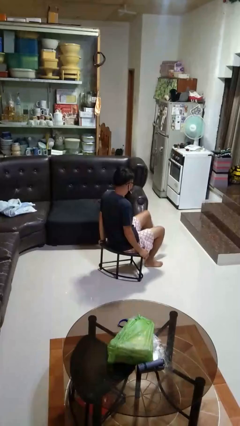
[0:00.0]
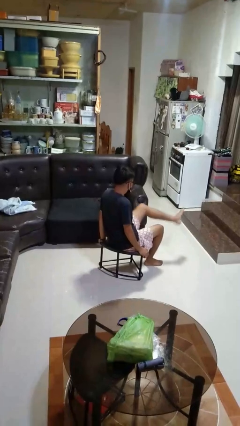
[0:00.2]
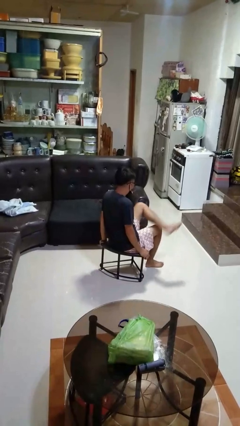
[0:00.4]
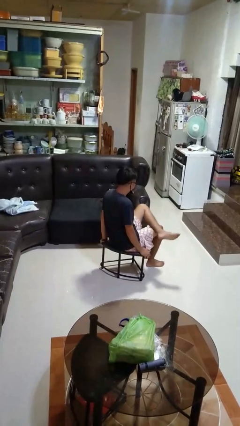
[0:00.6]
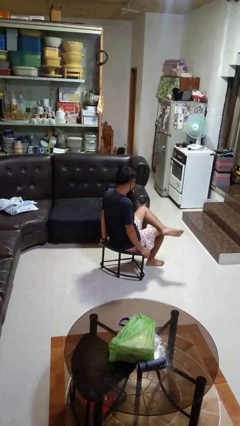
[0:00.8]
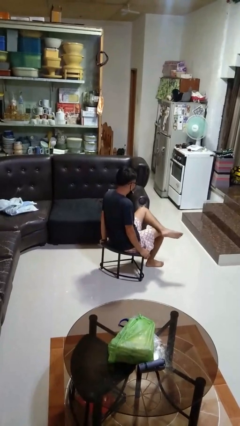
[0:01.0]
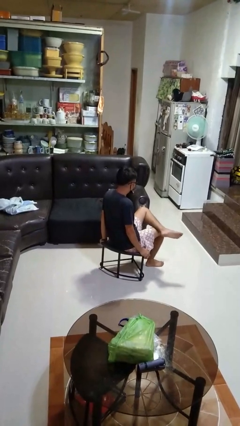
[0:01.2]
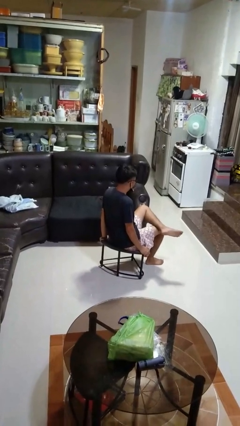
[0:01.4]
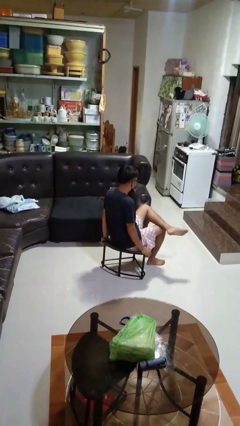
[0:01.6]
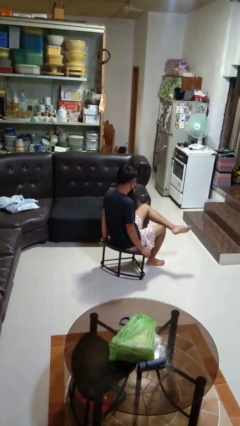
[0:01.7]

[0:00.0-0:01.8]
person crosses legs

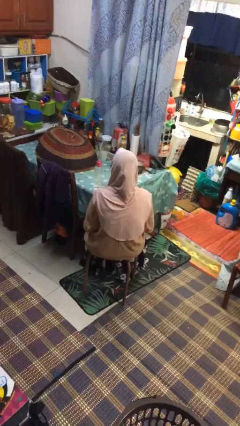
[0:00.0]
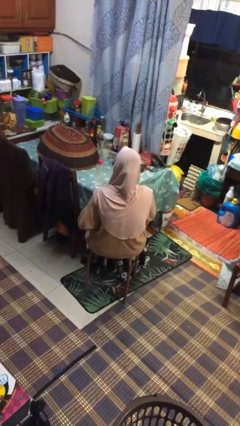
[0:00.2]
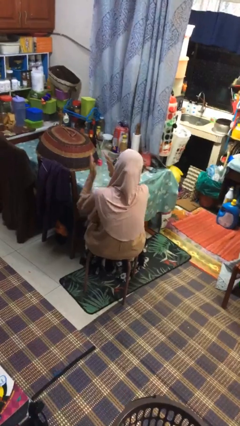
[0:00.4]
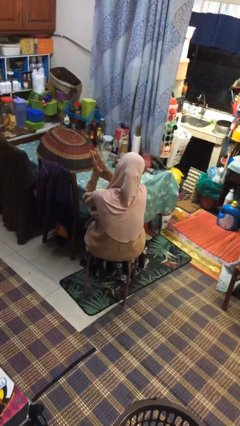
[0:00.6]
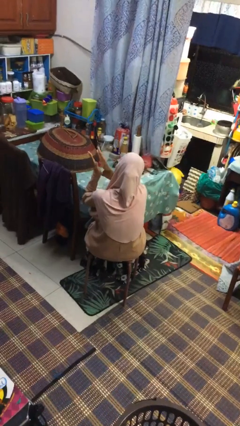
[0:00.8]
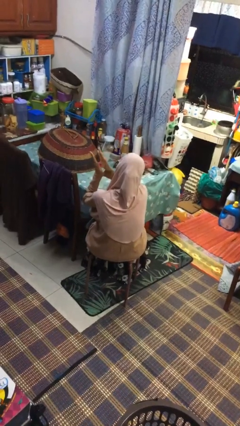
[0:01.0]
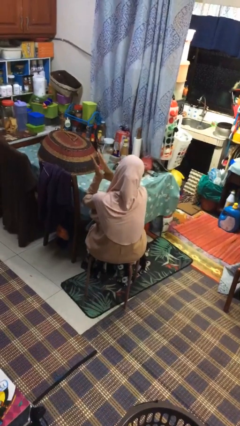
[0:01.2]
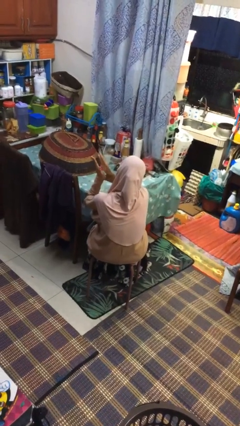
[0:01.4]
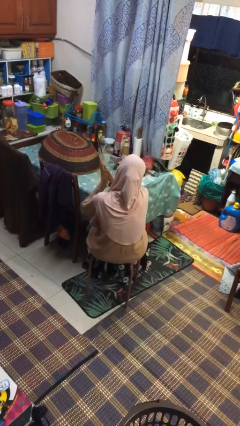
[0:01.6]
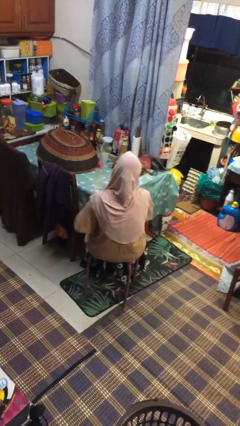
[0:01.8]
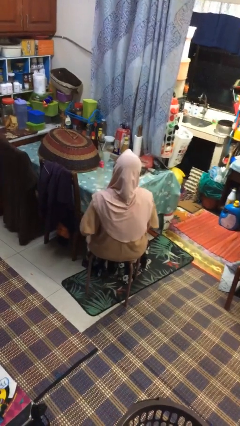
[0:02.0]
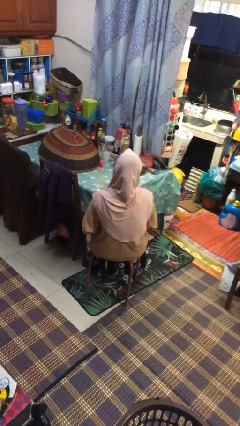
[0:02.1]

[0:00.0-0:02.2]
person claps hands

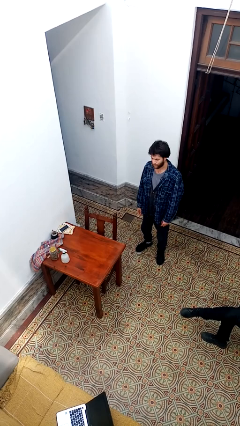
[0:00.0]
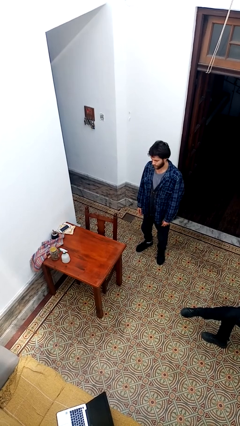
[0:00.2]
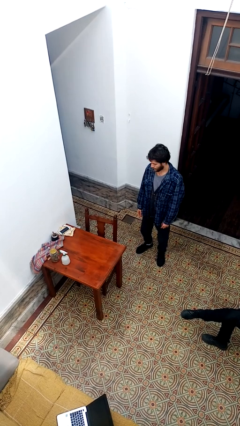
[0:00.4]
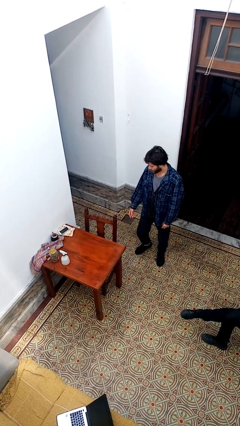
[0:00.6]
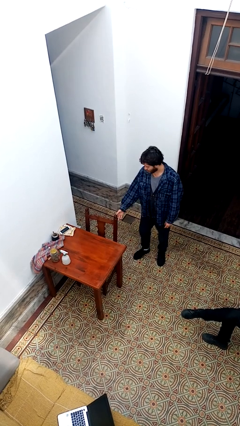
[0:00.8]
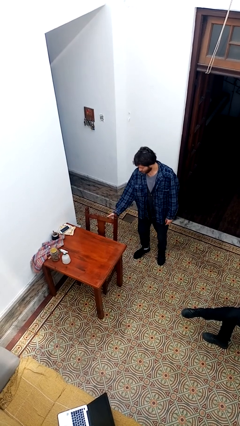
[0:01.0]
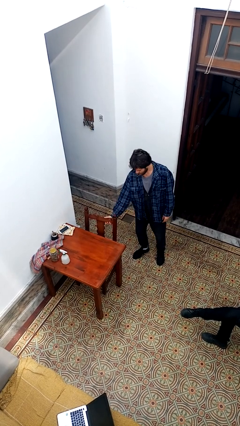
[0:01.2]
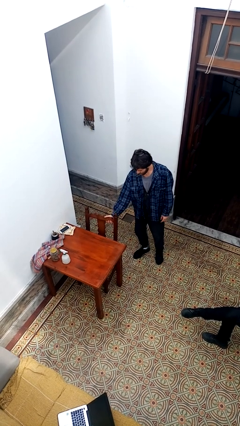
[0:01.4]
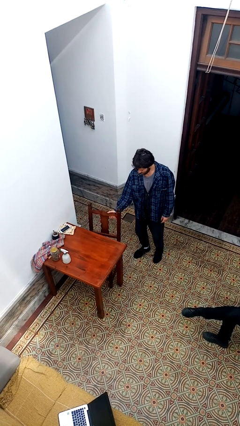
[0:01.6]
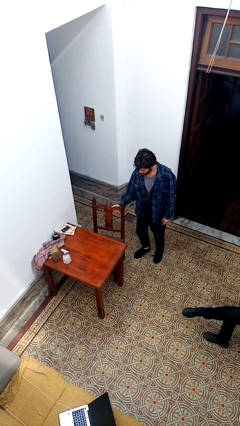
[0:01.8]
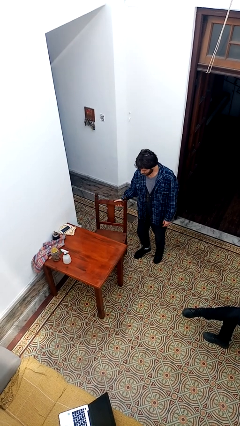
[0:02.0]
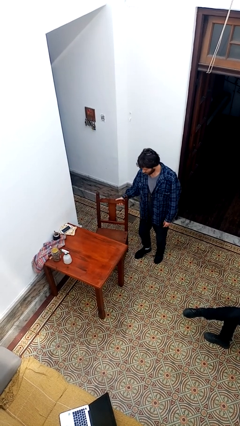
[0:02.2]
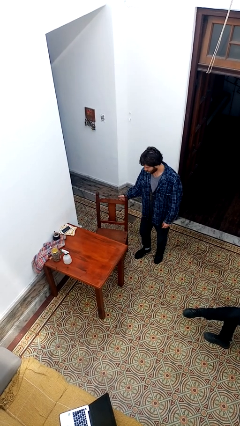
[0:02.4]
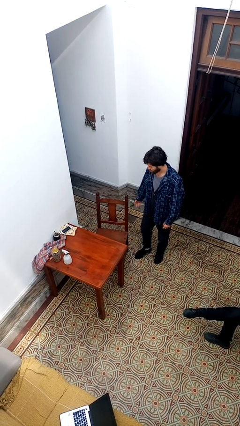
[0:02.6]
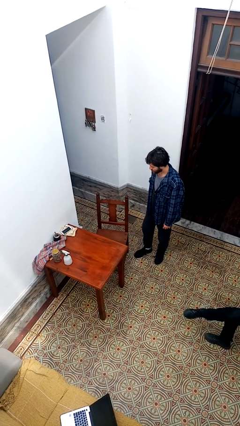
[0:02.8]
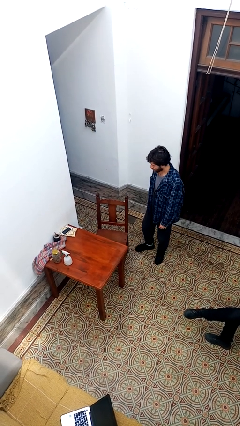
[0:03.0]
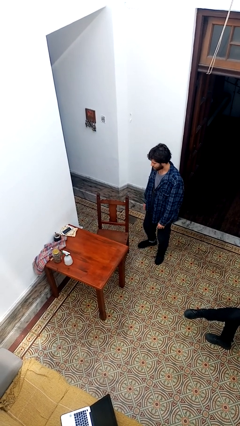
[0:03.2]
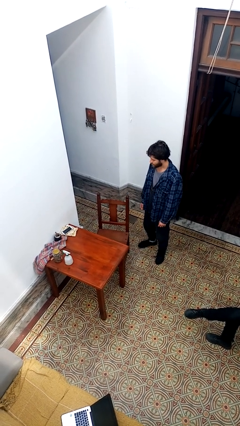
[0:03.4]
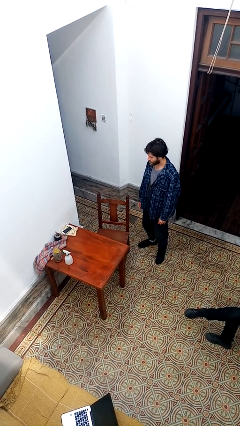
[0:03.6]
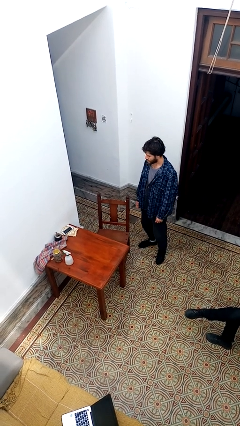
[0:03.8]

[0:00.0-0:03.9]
person pulls out chair

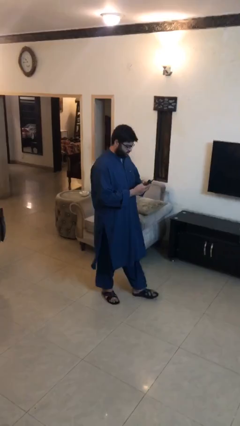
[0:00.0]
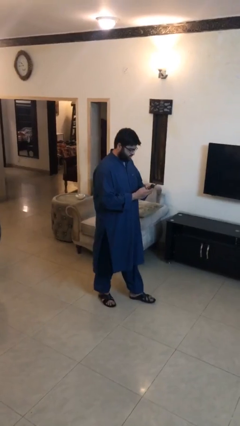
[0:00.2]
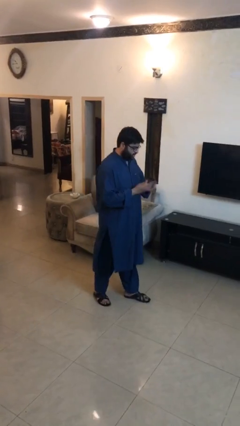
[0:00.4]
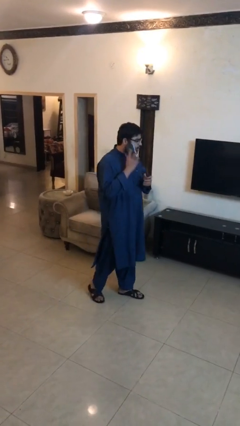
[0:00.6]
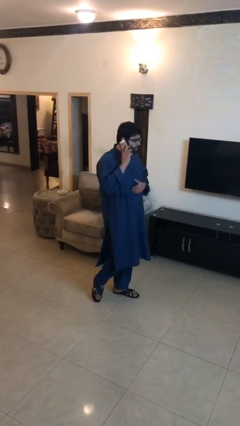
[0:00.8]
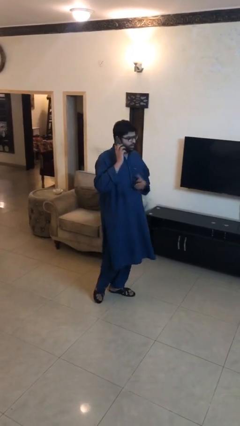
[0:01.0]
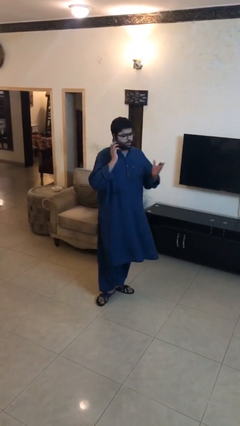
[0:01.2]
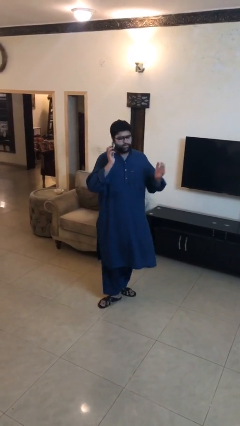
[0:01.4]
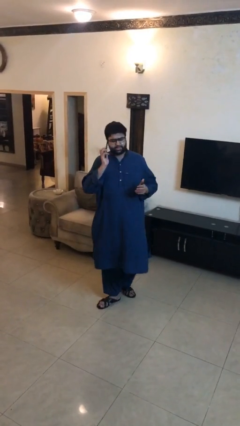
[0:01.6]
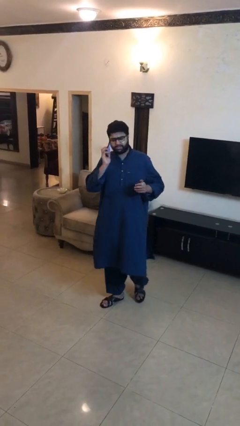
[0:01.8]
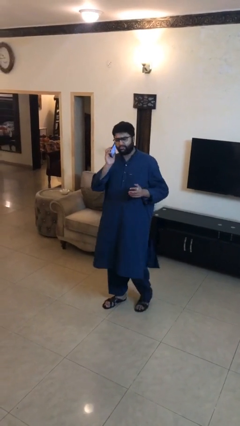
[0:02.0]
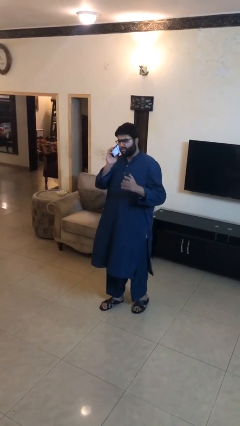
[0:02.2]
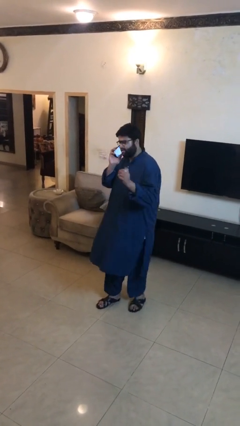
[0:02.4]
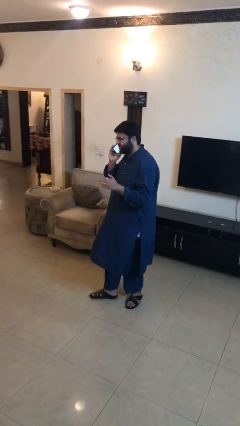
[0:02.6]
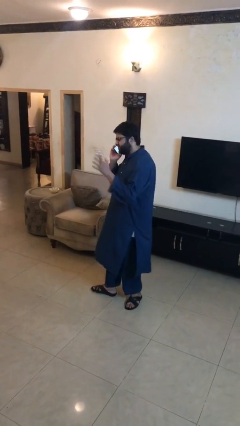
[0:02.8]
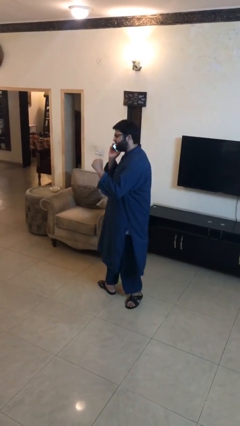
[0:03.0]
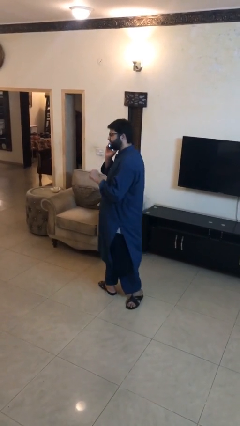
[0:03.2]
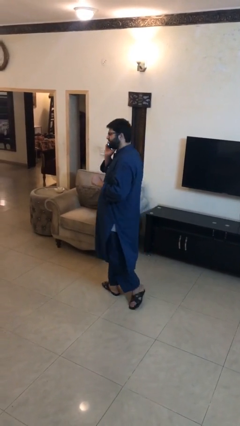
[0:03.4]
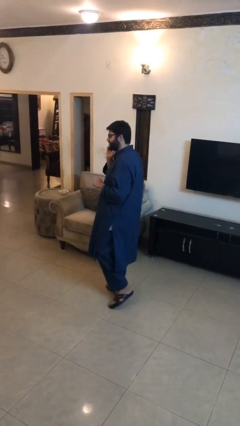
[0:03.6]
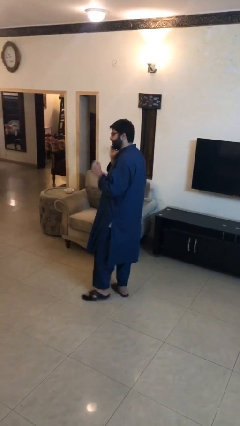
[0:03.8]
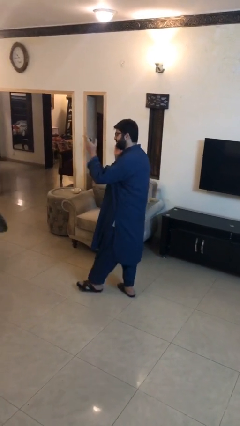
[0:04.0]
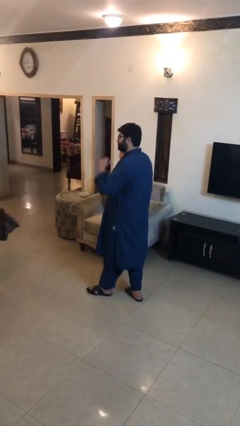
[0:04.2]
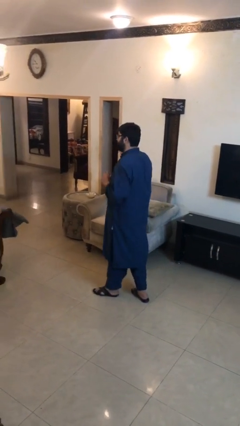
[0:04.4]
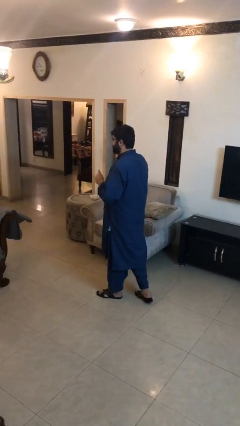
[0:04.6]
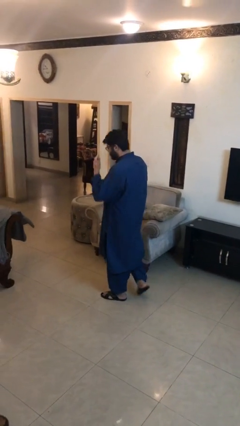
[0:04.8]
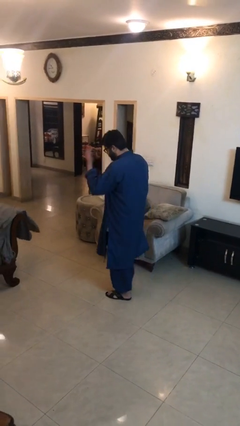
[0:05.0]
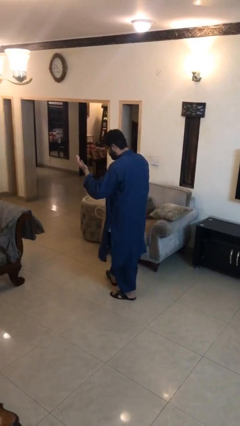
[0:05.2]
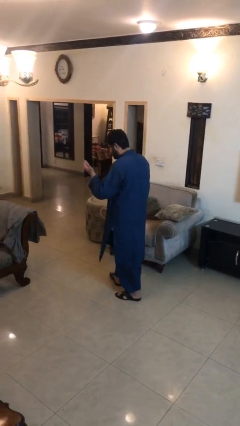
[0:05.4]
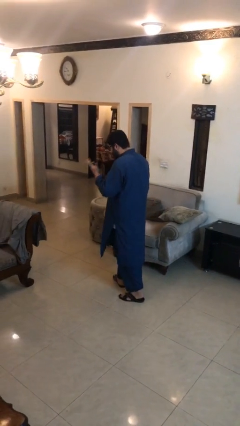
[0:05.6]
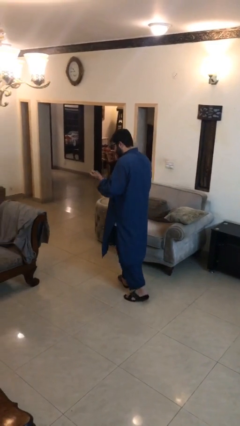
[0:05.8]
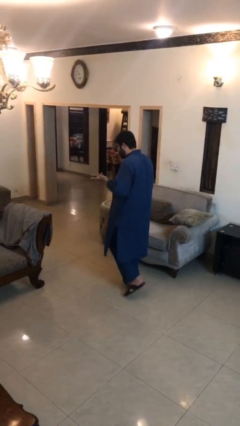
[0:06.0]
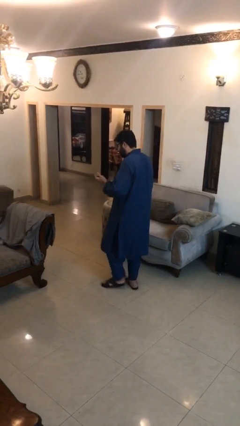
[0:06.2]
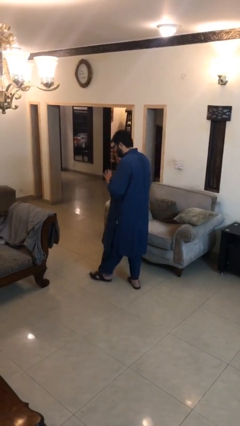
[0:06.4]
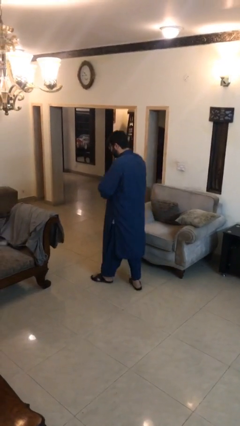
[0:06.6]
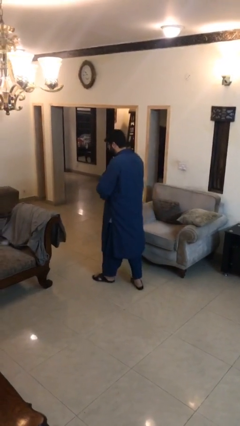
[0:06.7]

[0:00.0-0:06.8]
person talks on phone

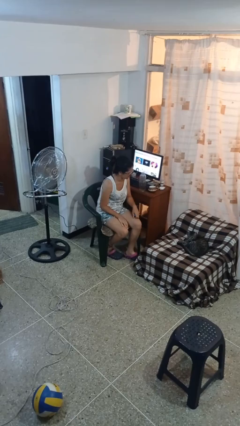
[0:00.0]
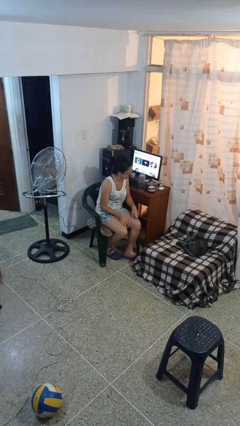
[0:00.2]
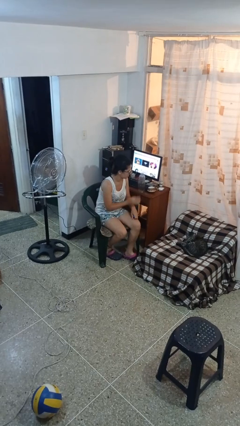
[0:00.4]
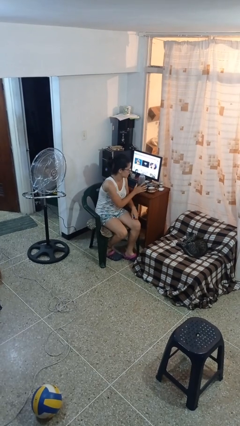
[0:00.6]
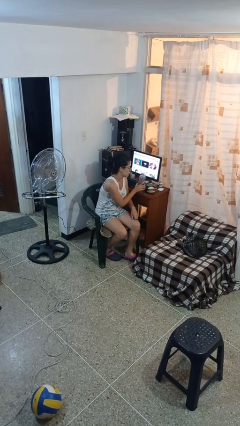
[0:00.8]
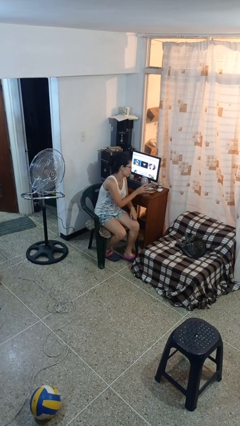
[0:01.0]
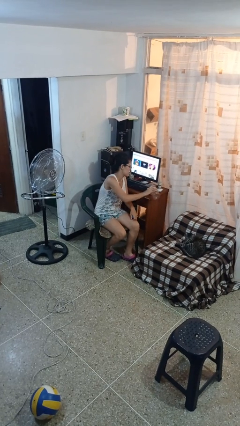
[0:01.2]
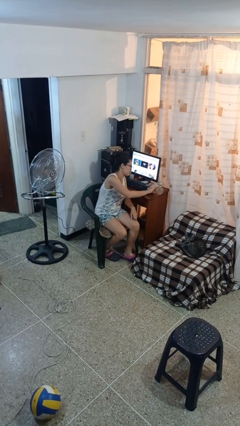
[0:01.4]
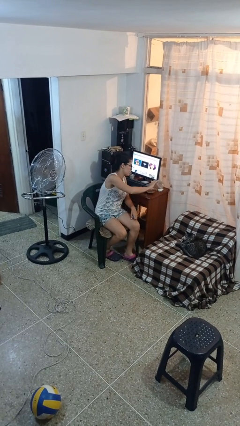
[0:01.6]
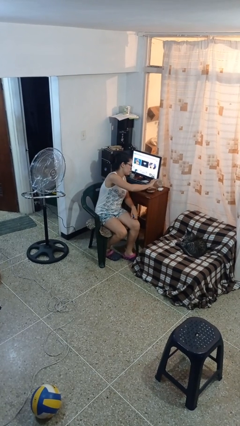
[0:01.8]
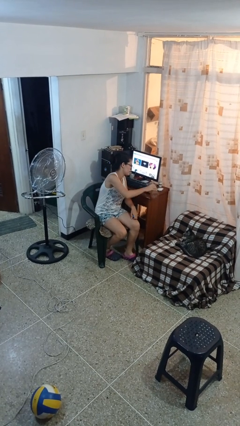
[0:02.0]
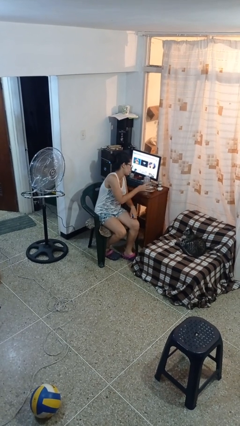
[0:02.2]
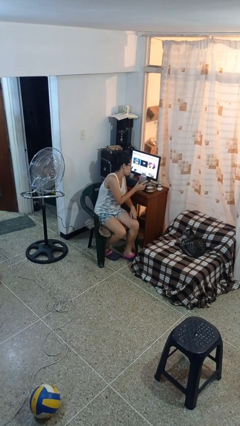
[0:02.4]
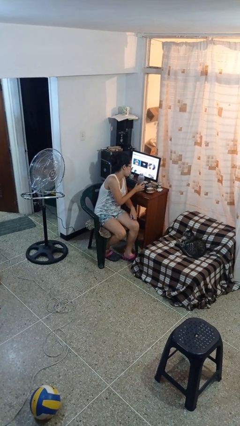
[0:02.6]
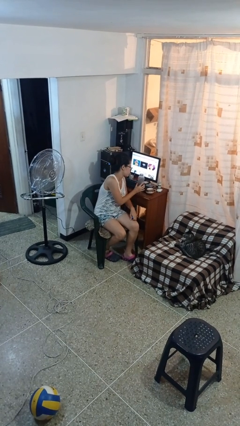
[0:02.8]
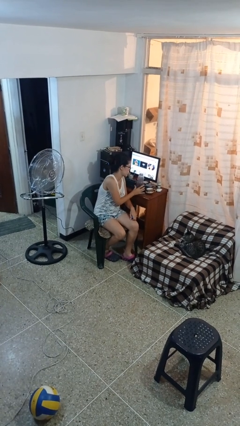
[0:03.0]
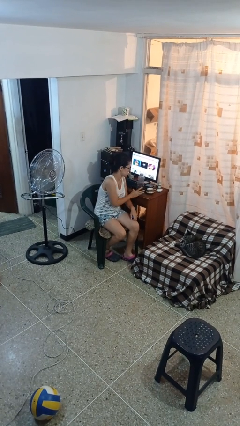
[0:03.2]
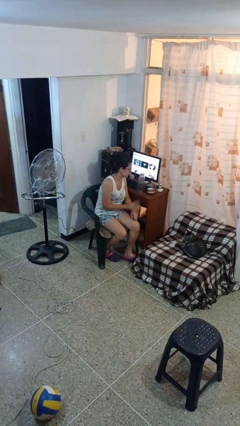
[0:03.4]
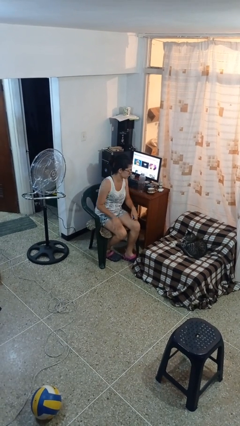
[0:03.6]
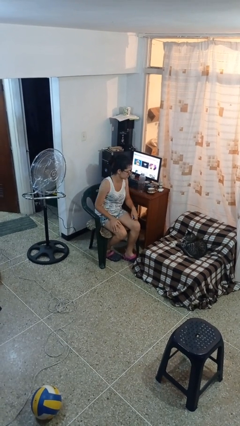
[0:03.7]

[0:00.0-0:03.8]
person pours liquid into cup
